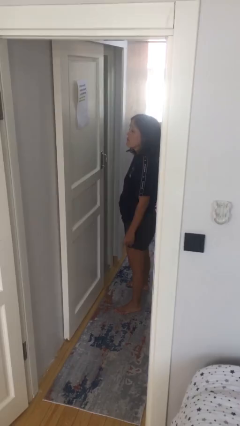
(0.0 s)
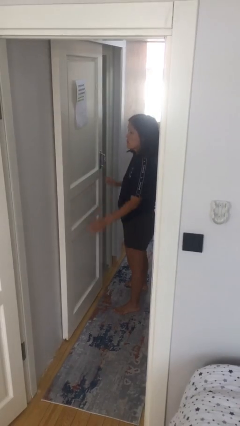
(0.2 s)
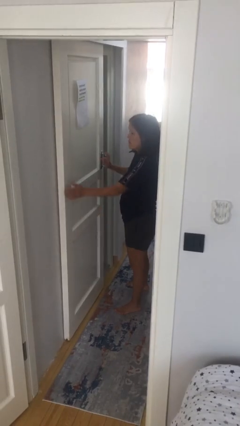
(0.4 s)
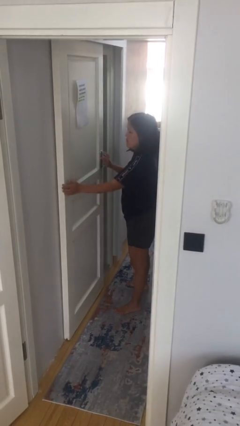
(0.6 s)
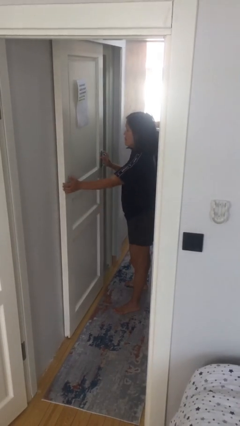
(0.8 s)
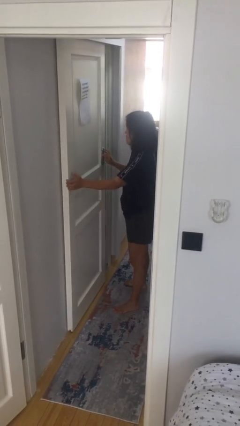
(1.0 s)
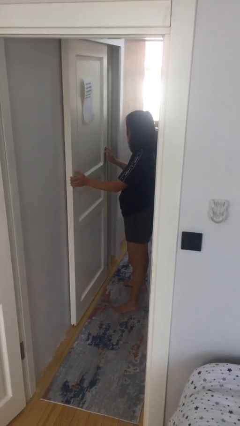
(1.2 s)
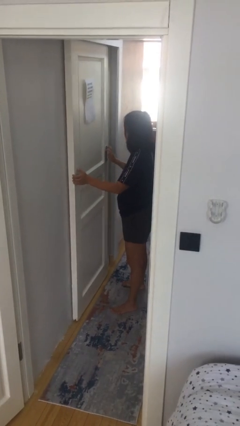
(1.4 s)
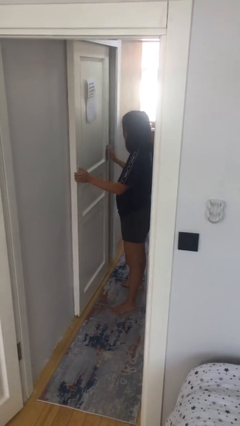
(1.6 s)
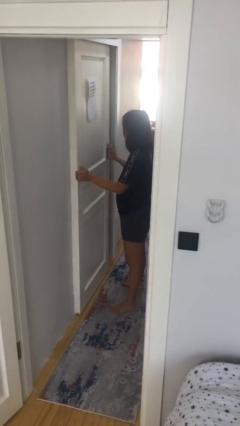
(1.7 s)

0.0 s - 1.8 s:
person closes sliding door

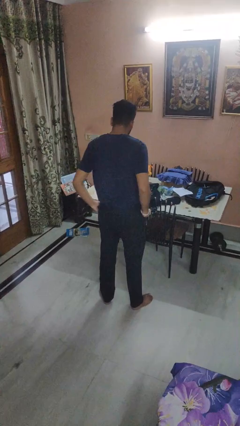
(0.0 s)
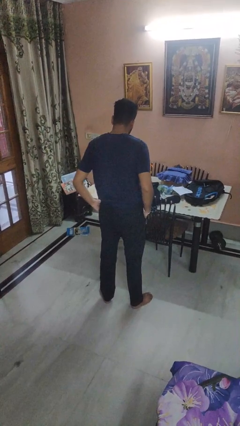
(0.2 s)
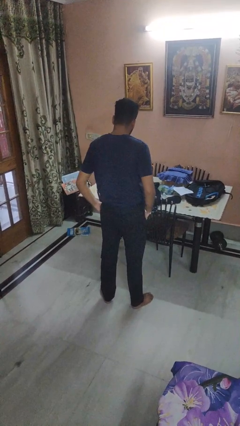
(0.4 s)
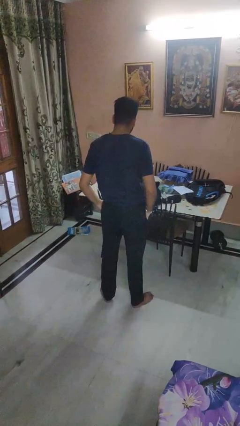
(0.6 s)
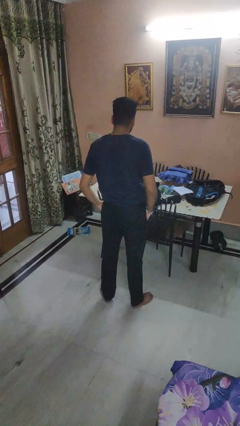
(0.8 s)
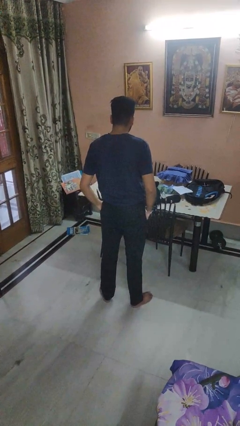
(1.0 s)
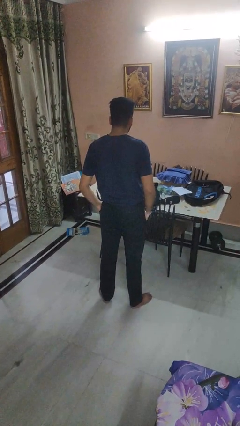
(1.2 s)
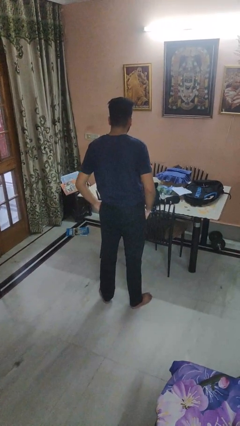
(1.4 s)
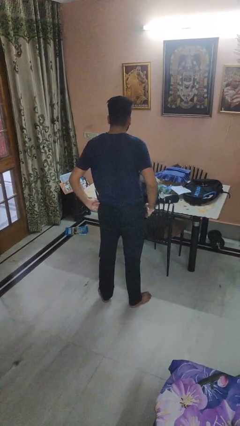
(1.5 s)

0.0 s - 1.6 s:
person puts hands in back pockets

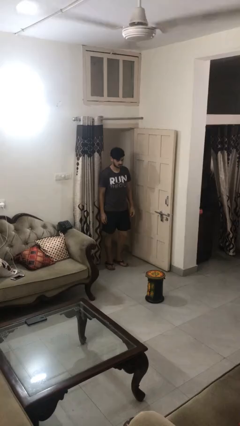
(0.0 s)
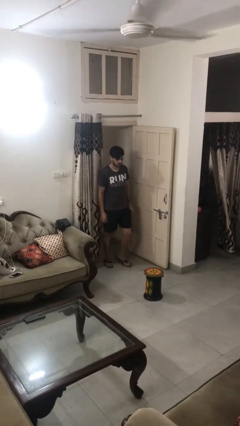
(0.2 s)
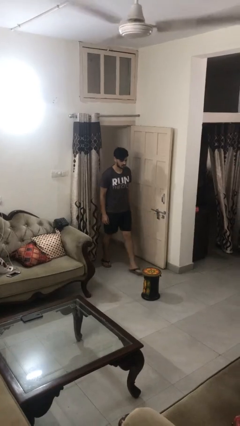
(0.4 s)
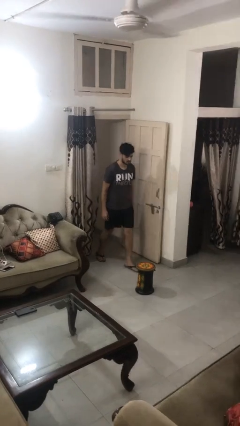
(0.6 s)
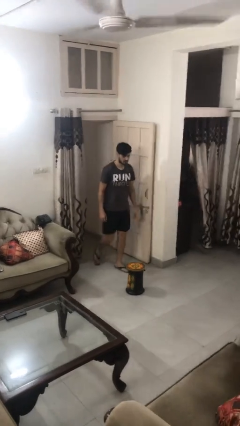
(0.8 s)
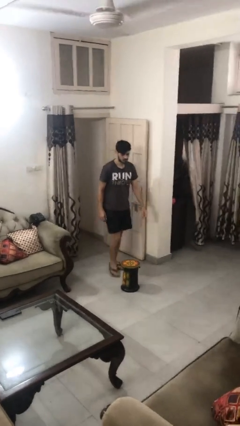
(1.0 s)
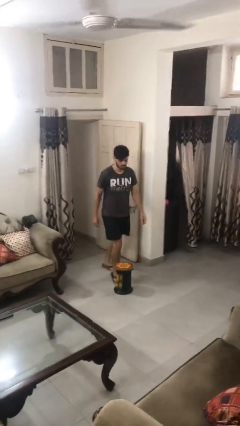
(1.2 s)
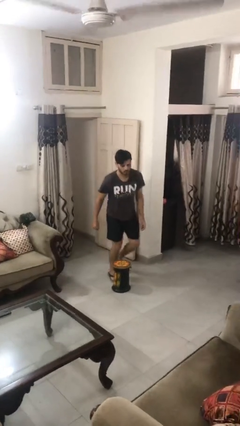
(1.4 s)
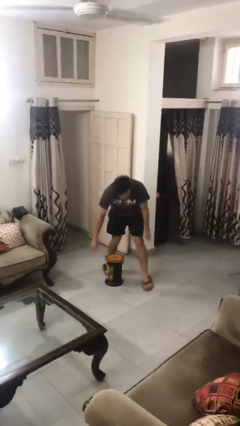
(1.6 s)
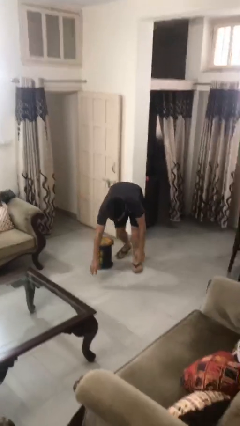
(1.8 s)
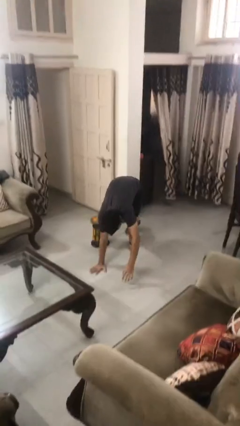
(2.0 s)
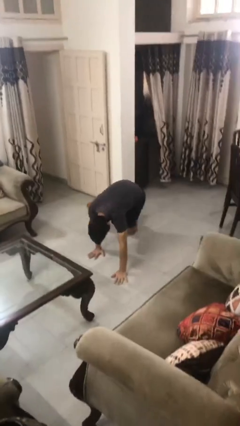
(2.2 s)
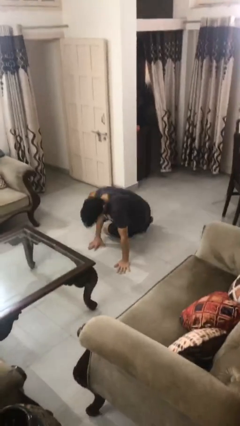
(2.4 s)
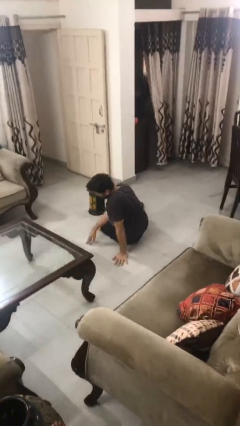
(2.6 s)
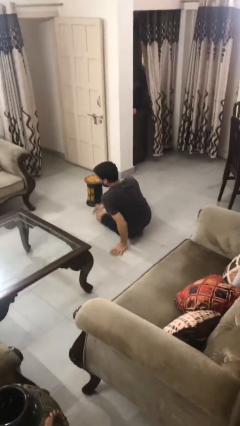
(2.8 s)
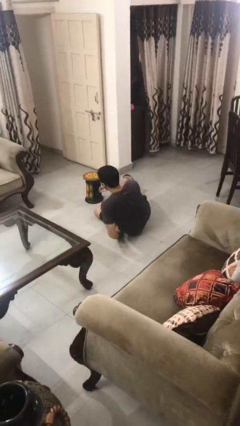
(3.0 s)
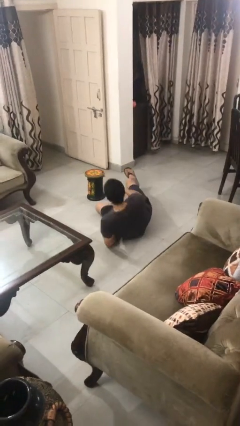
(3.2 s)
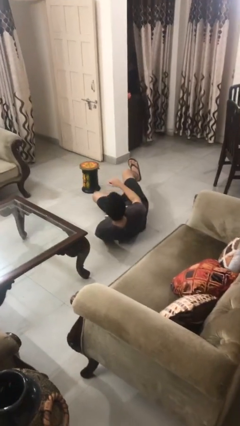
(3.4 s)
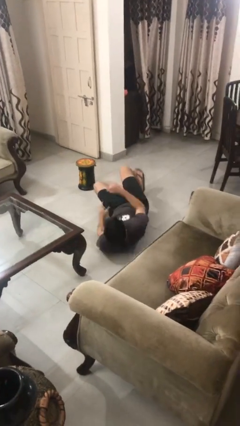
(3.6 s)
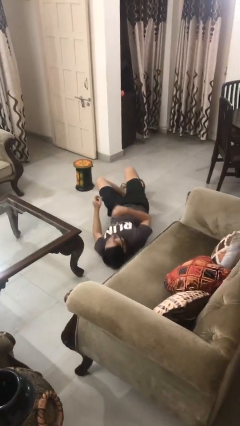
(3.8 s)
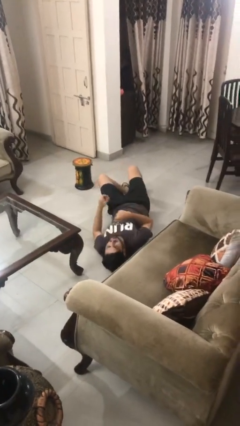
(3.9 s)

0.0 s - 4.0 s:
person trips on object on floor

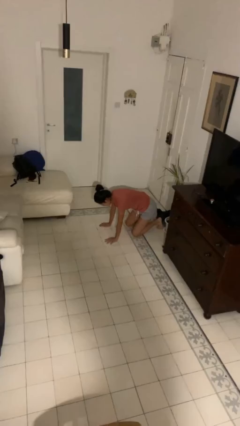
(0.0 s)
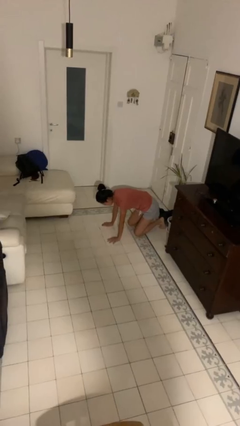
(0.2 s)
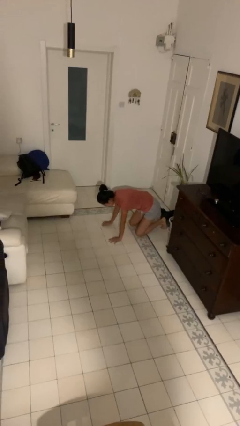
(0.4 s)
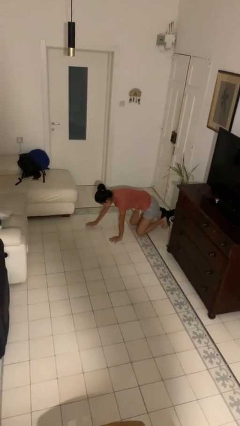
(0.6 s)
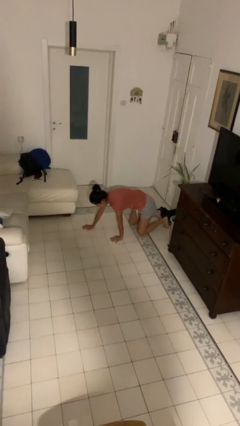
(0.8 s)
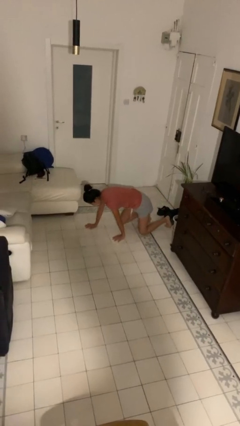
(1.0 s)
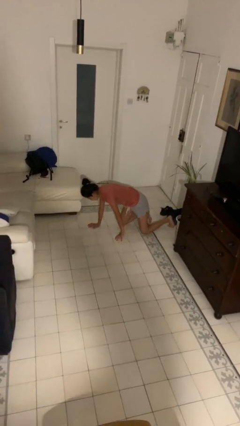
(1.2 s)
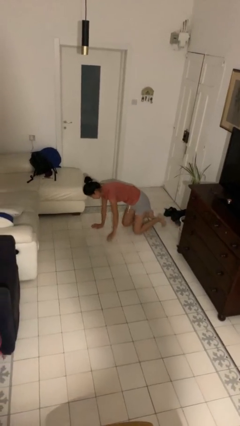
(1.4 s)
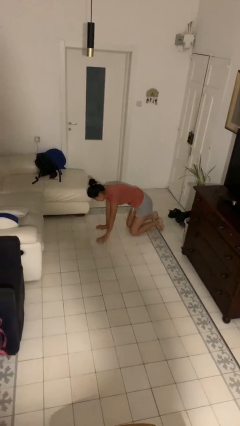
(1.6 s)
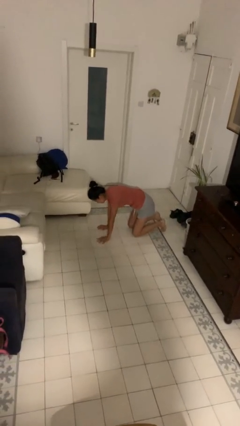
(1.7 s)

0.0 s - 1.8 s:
person crawls

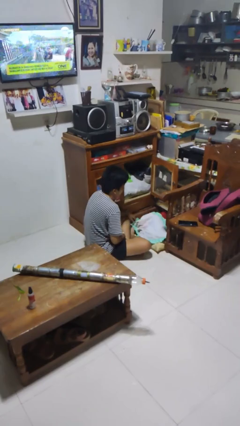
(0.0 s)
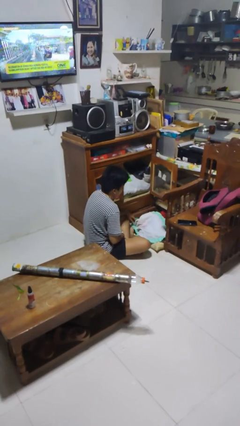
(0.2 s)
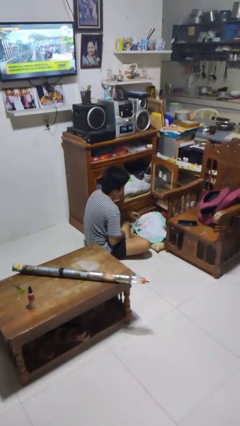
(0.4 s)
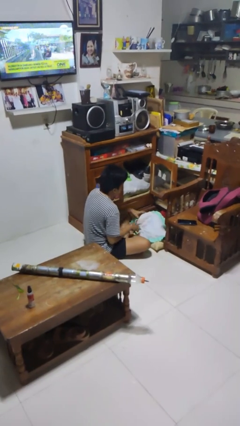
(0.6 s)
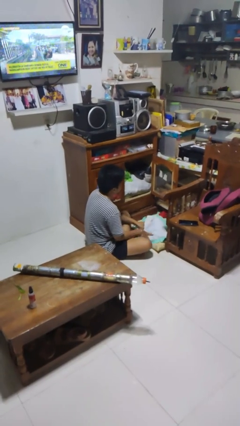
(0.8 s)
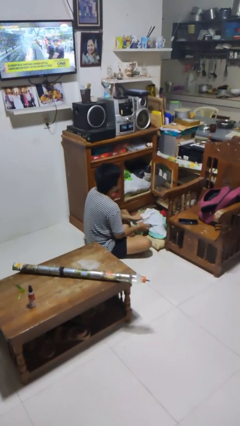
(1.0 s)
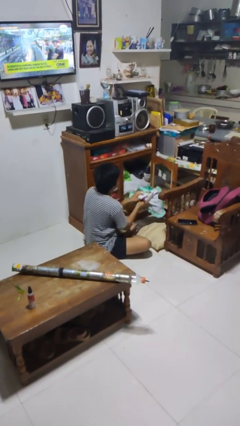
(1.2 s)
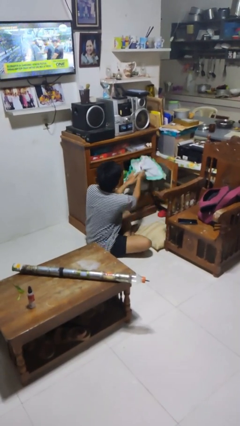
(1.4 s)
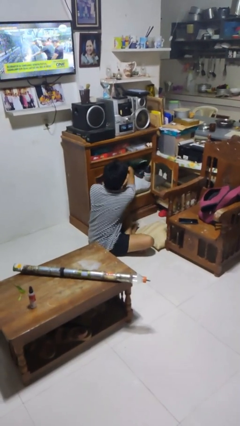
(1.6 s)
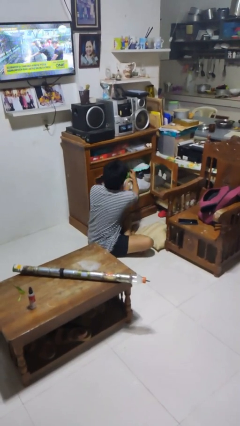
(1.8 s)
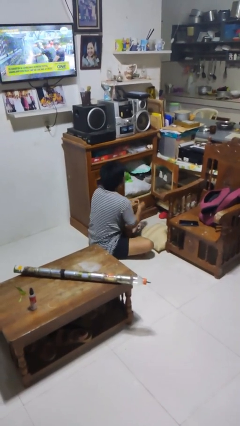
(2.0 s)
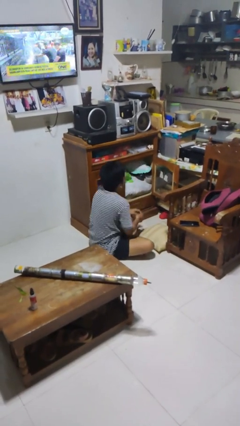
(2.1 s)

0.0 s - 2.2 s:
person takes clothes from dresser

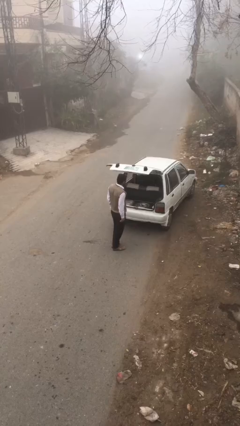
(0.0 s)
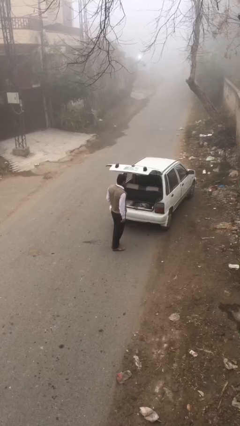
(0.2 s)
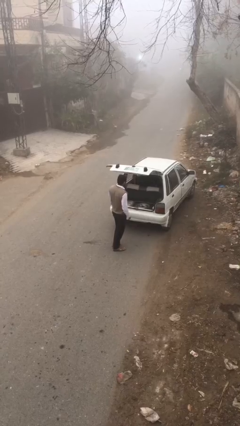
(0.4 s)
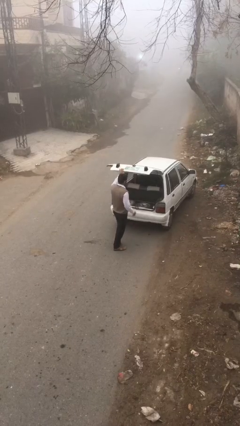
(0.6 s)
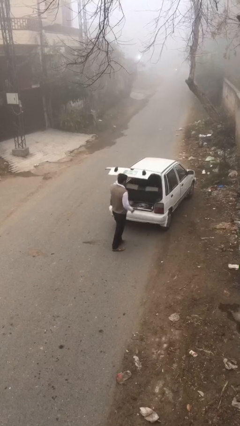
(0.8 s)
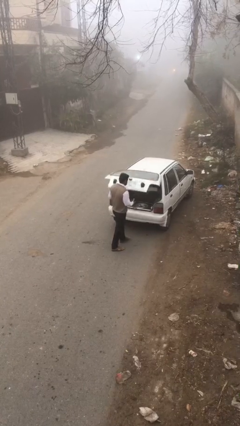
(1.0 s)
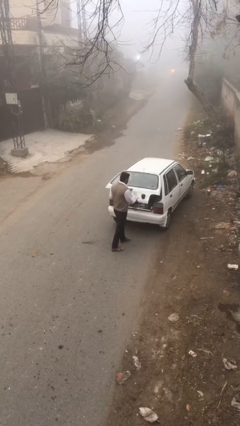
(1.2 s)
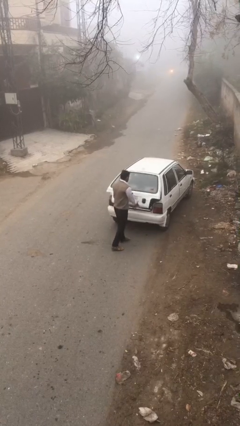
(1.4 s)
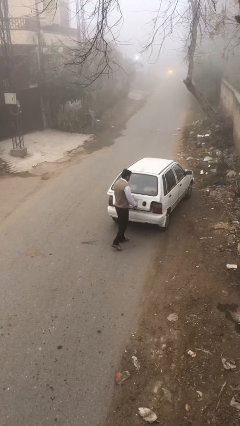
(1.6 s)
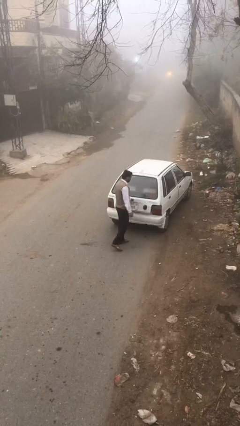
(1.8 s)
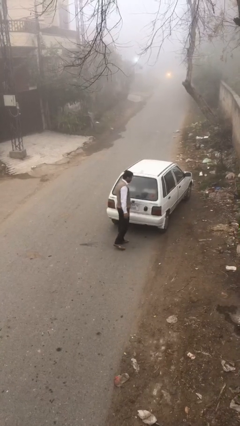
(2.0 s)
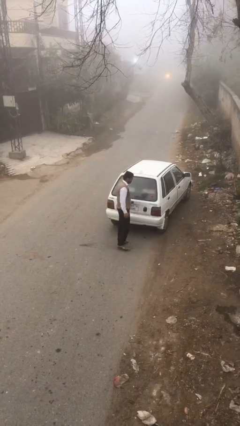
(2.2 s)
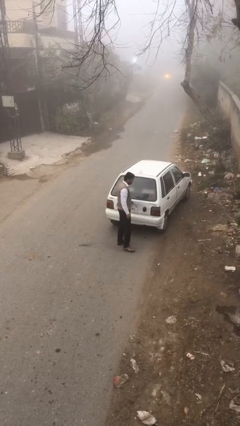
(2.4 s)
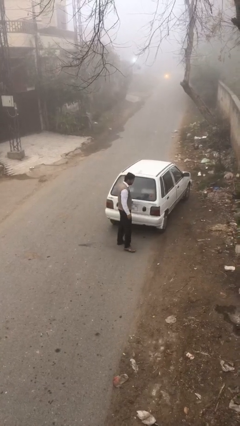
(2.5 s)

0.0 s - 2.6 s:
person closes car trunk

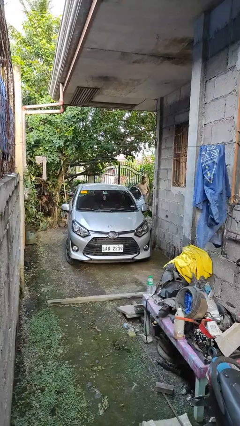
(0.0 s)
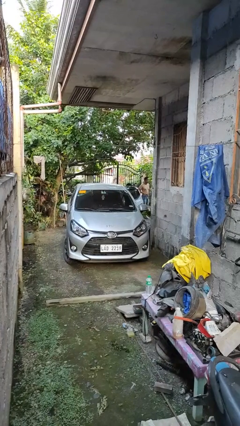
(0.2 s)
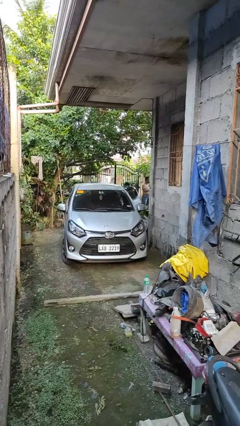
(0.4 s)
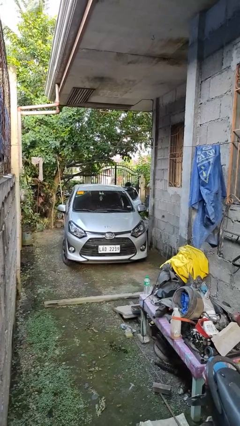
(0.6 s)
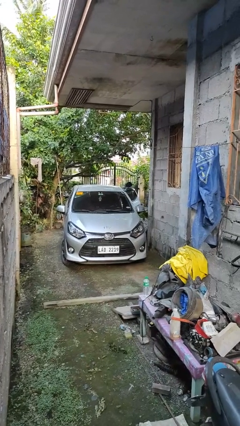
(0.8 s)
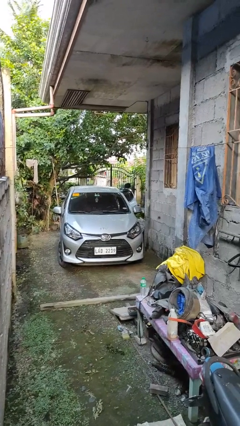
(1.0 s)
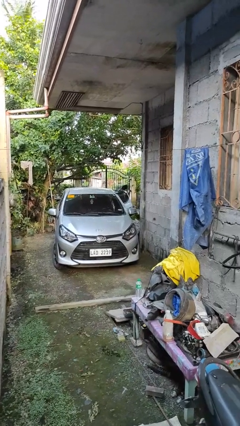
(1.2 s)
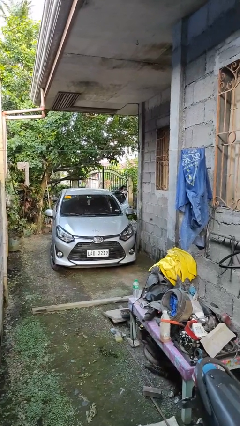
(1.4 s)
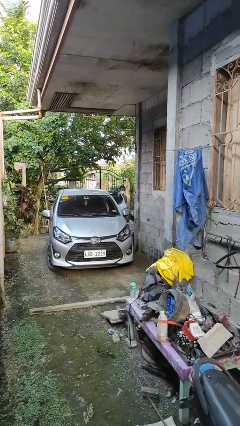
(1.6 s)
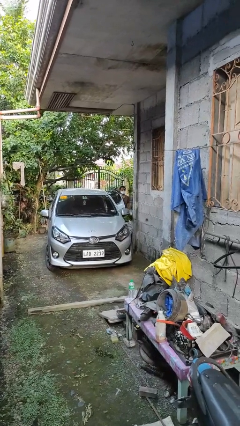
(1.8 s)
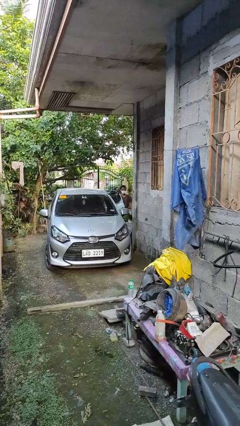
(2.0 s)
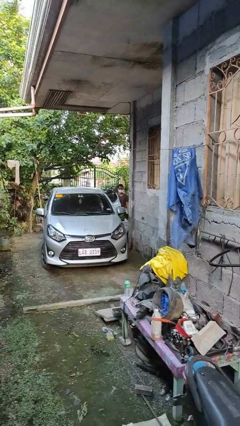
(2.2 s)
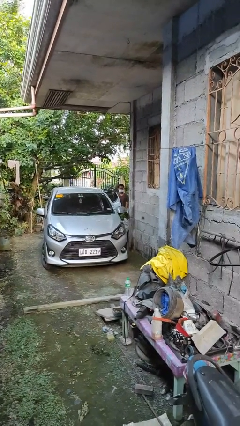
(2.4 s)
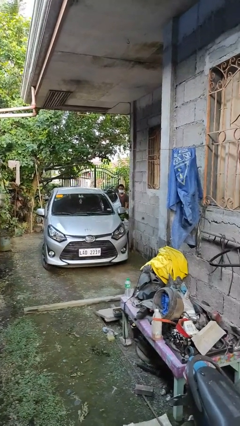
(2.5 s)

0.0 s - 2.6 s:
person exits car

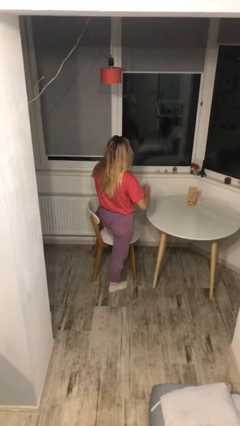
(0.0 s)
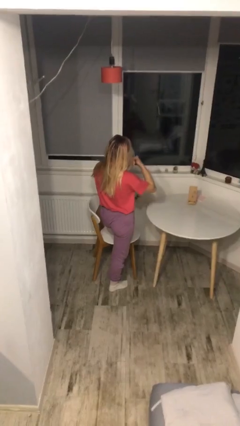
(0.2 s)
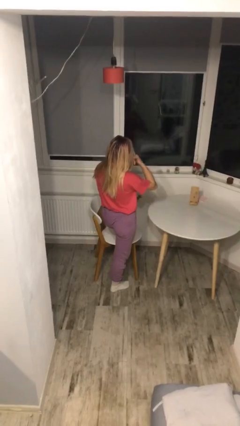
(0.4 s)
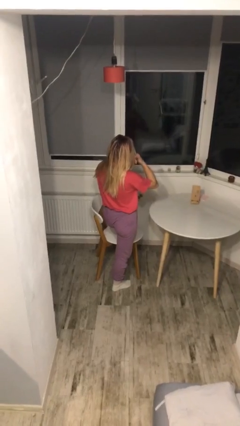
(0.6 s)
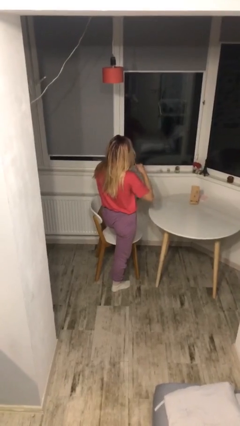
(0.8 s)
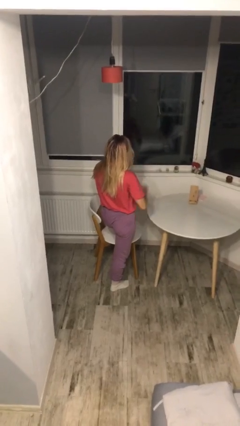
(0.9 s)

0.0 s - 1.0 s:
person gestures number five
